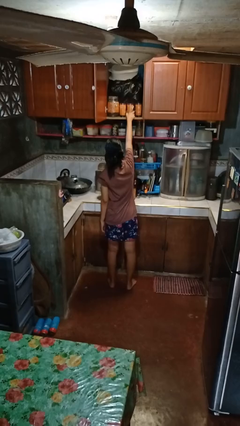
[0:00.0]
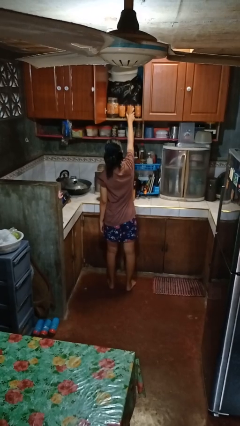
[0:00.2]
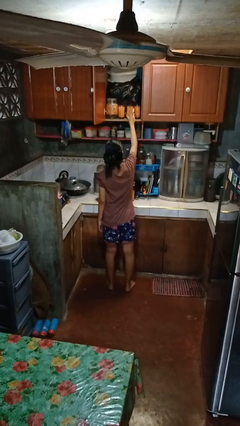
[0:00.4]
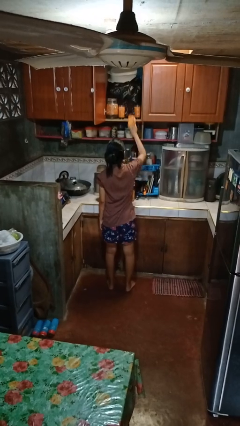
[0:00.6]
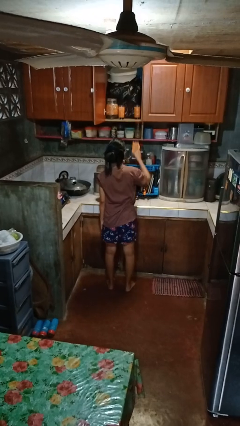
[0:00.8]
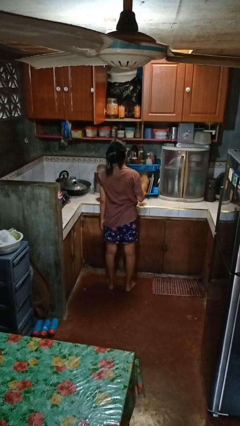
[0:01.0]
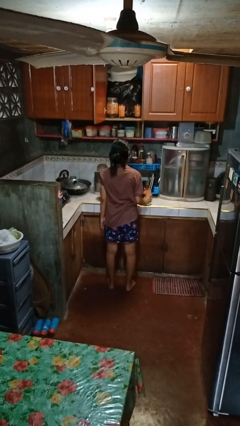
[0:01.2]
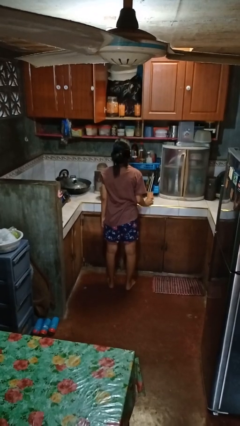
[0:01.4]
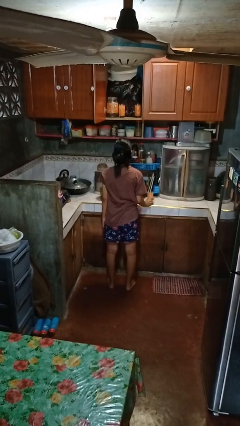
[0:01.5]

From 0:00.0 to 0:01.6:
person takes object from cabinet

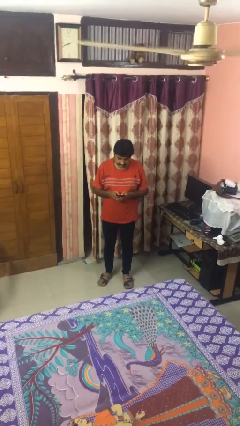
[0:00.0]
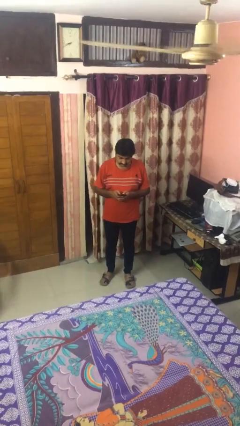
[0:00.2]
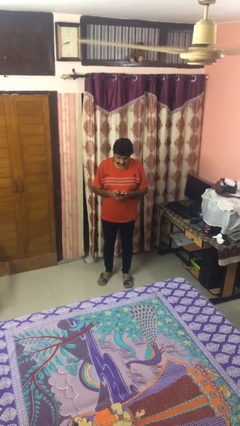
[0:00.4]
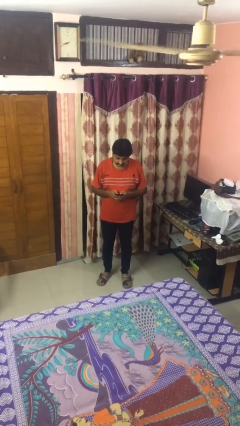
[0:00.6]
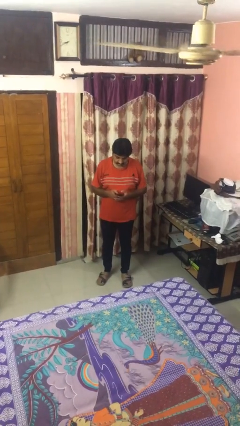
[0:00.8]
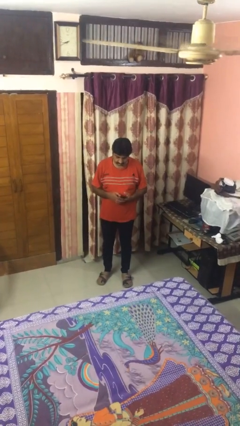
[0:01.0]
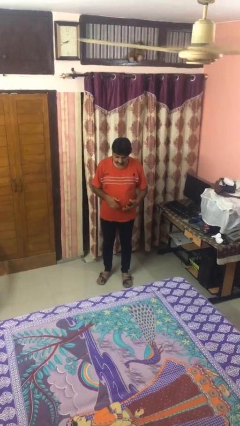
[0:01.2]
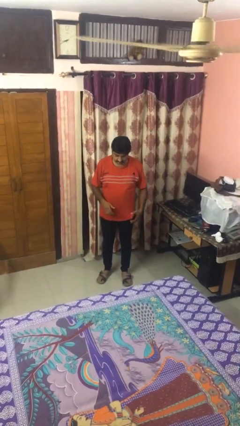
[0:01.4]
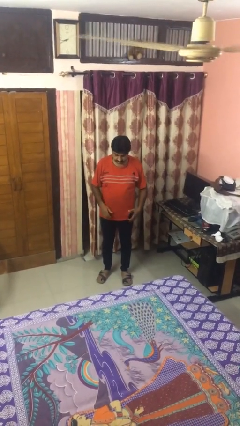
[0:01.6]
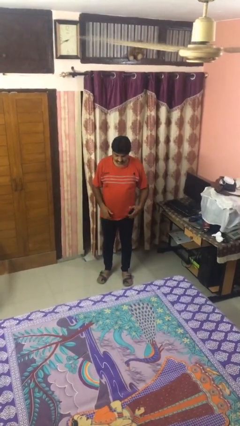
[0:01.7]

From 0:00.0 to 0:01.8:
person puts phone into pocket

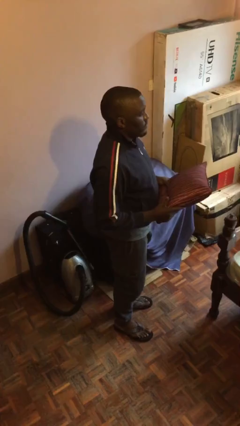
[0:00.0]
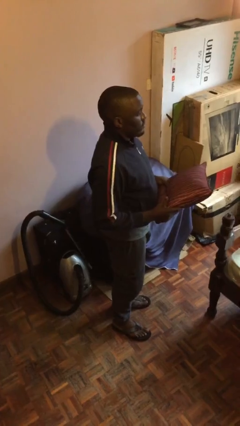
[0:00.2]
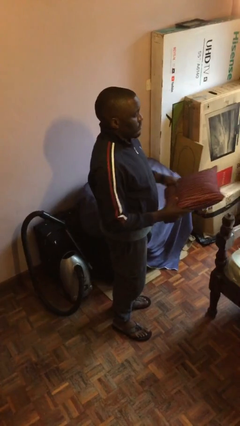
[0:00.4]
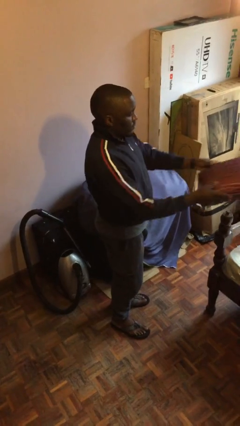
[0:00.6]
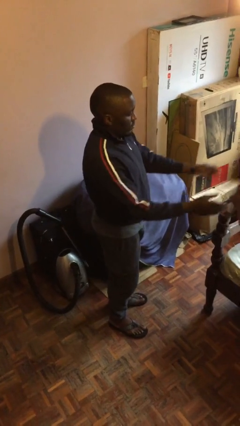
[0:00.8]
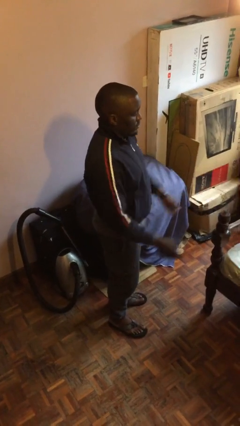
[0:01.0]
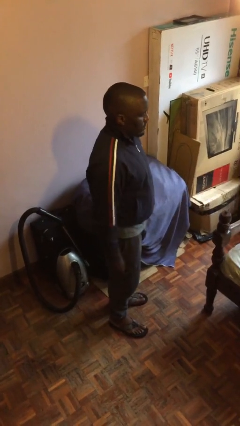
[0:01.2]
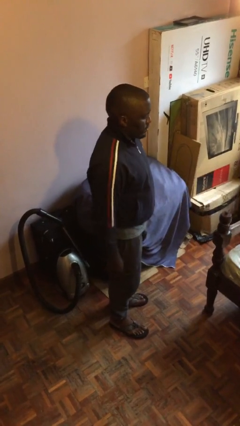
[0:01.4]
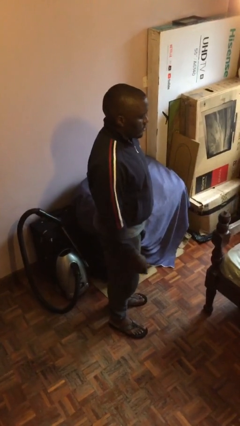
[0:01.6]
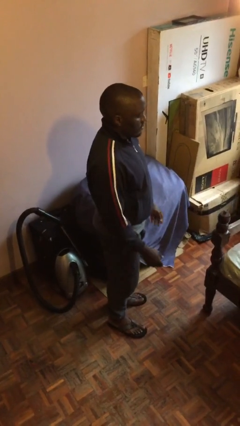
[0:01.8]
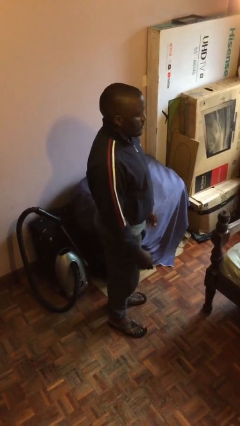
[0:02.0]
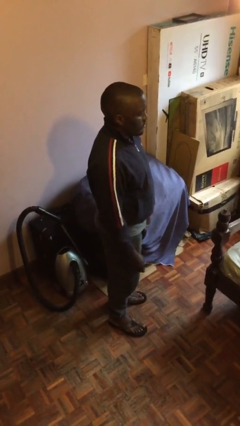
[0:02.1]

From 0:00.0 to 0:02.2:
person throws object on bed

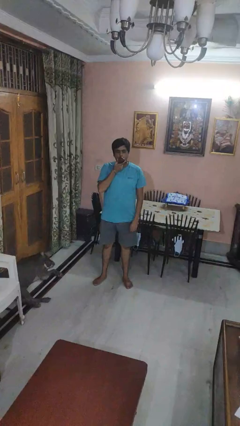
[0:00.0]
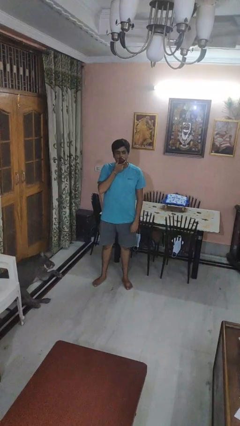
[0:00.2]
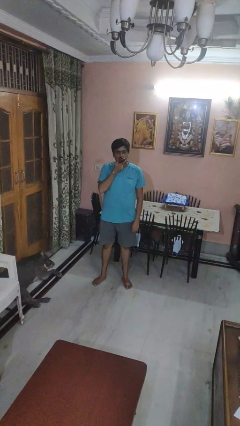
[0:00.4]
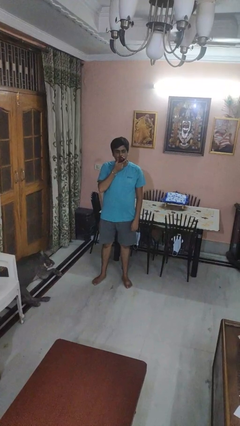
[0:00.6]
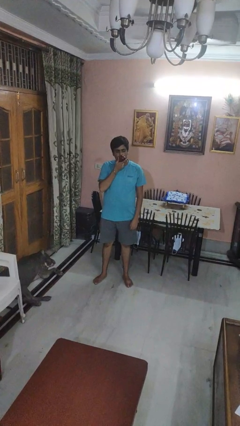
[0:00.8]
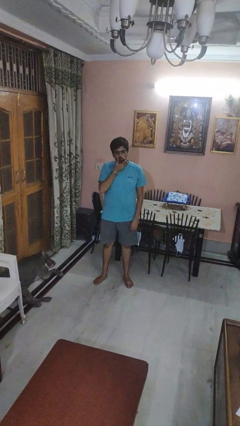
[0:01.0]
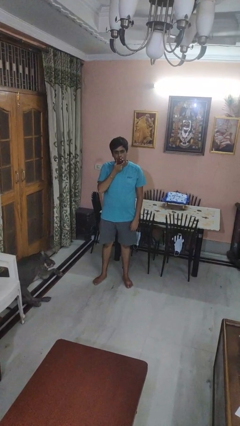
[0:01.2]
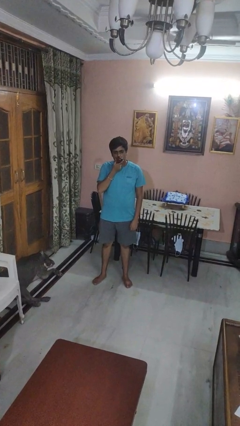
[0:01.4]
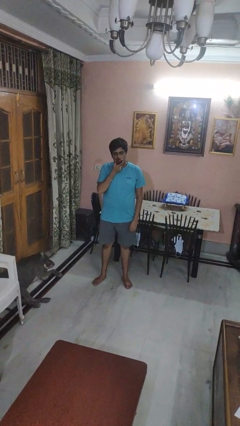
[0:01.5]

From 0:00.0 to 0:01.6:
person eats apple

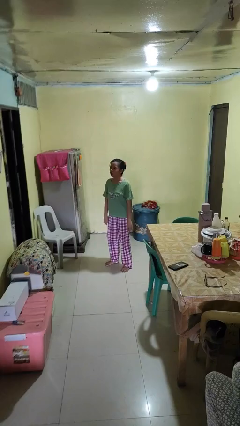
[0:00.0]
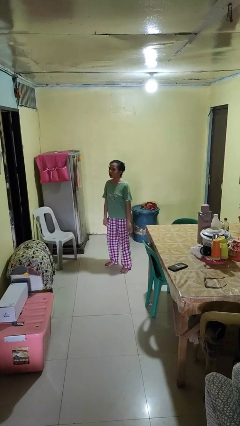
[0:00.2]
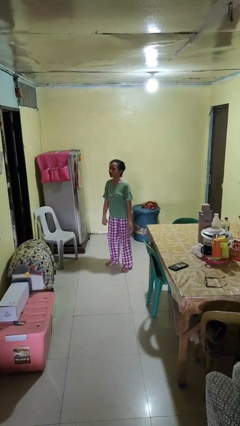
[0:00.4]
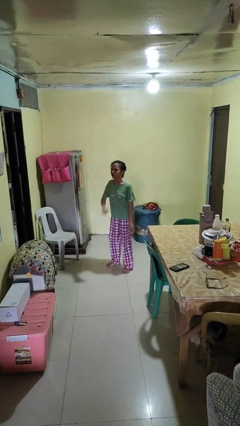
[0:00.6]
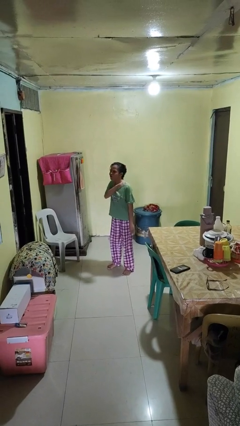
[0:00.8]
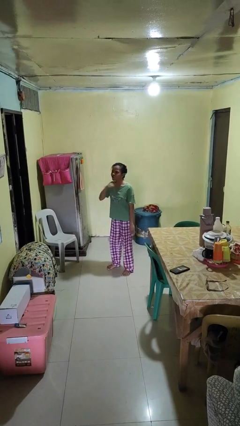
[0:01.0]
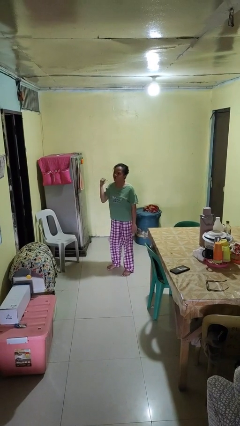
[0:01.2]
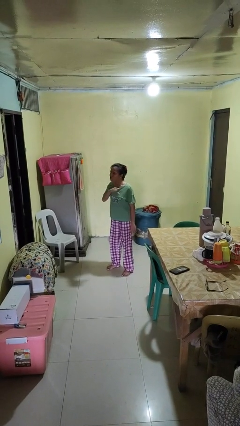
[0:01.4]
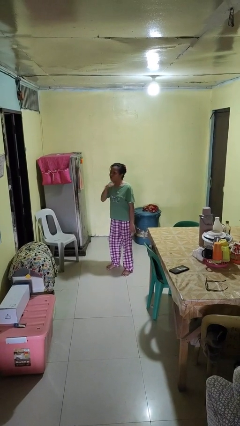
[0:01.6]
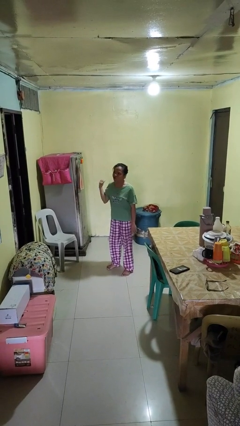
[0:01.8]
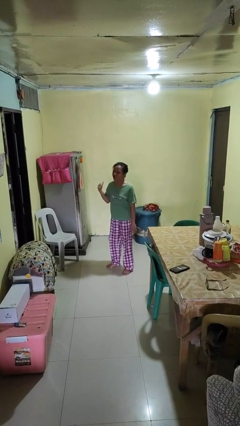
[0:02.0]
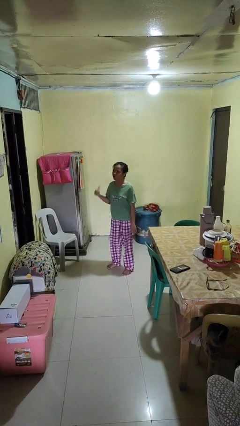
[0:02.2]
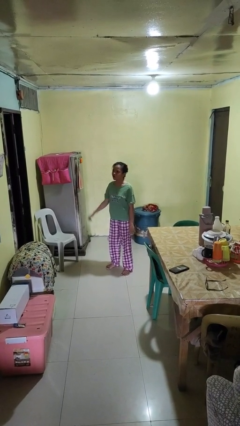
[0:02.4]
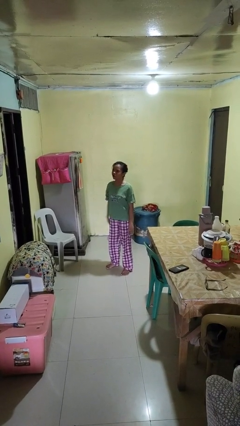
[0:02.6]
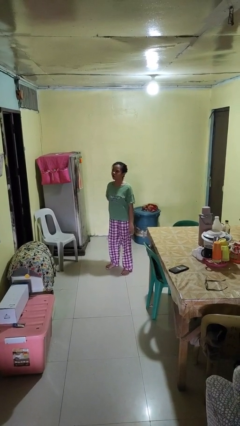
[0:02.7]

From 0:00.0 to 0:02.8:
person gestures cut

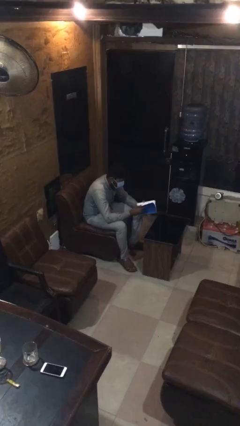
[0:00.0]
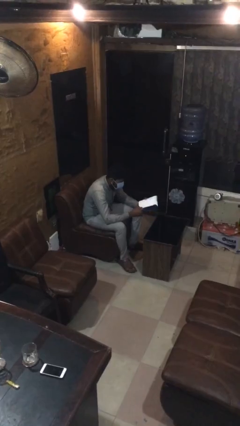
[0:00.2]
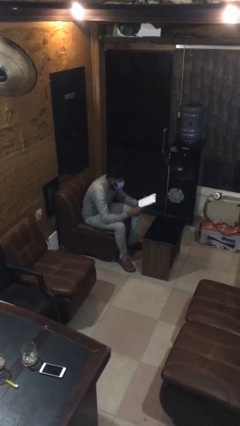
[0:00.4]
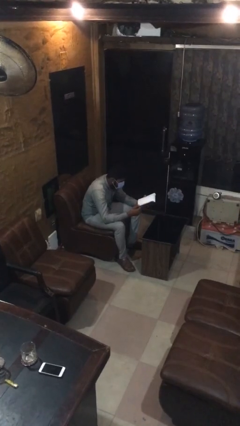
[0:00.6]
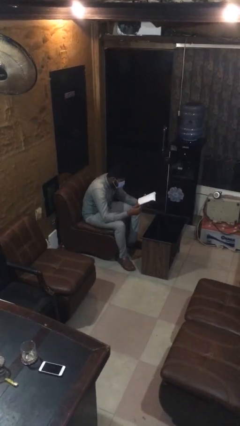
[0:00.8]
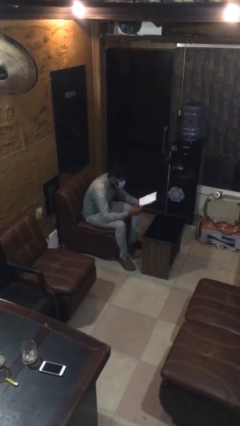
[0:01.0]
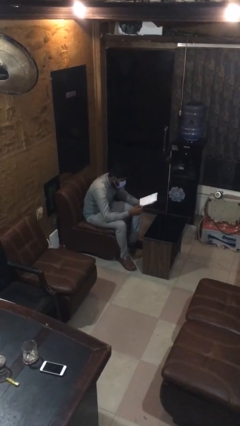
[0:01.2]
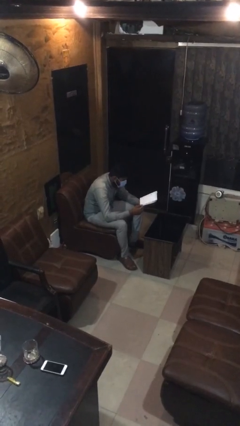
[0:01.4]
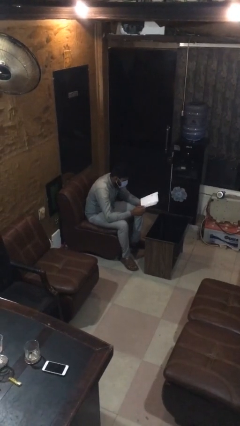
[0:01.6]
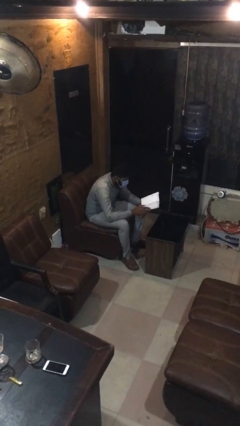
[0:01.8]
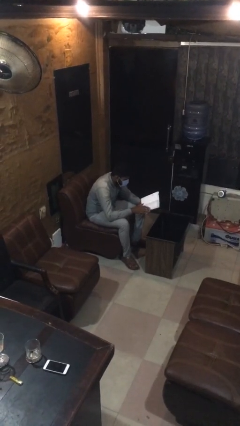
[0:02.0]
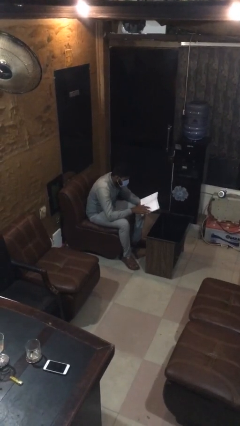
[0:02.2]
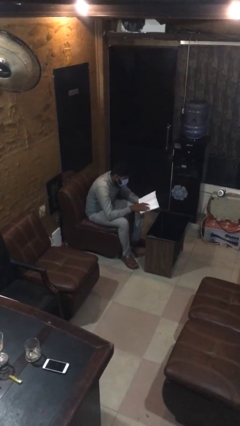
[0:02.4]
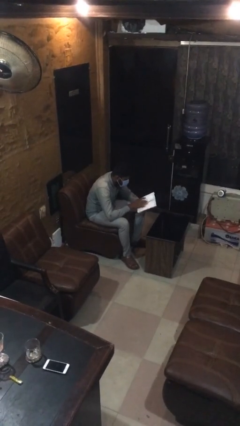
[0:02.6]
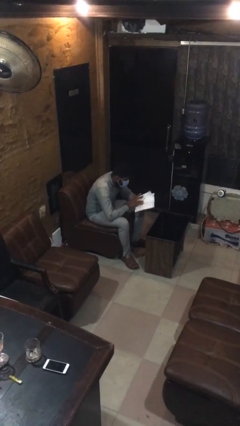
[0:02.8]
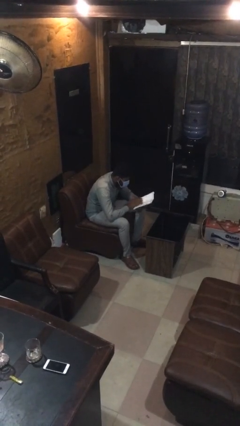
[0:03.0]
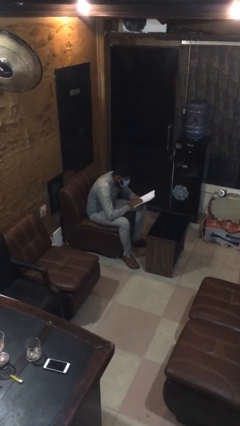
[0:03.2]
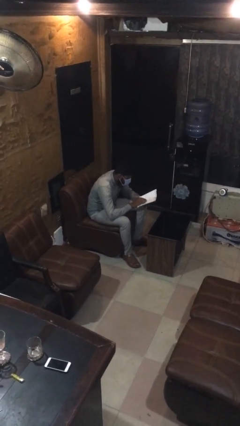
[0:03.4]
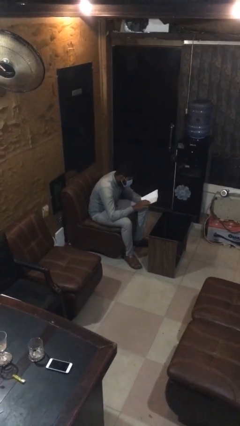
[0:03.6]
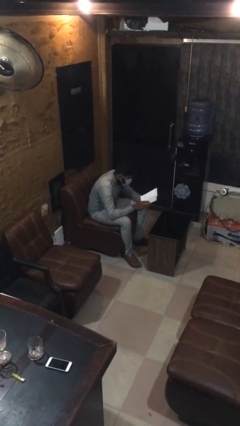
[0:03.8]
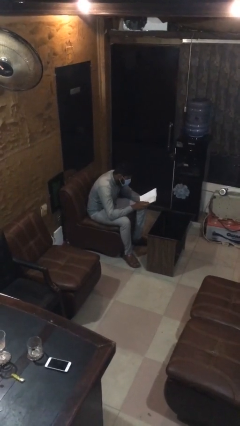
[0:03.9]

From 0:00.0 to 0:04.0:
person reads document

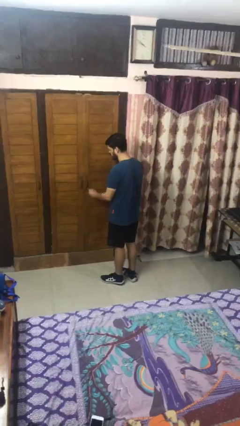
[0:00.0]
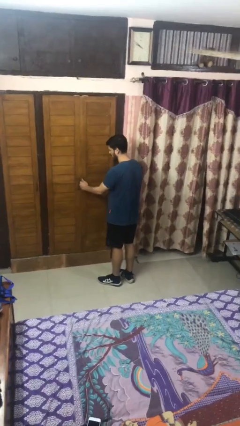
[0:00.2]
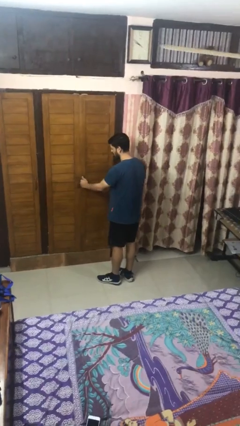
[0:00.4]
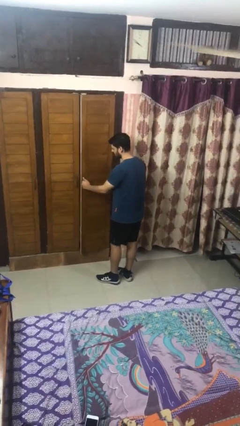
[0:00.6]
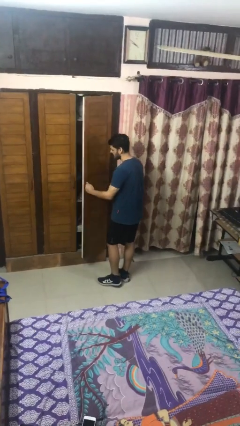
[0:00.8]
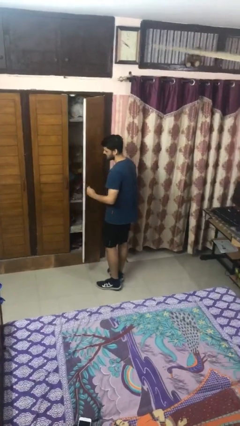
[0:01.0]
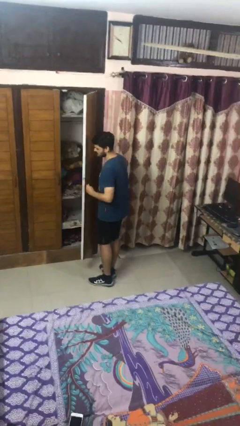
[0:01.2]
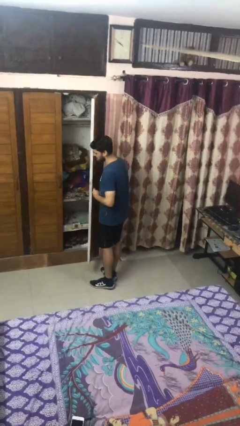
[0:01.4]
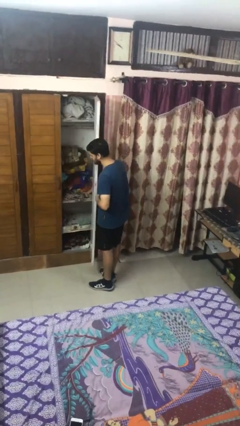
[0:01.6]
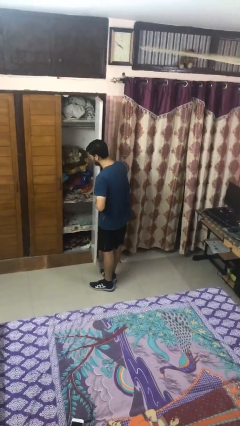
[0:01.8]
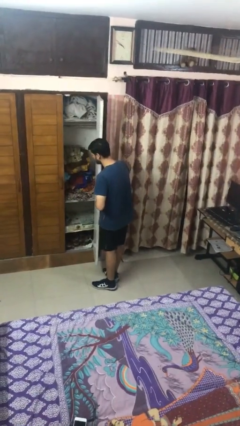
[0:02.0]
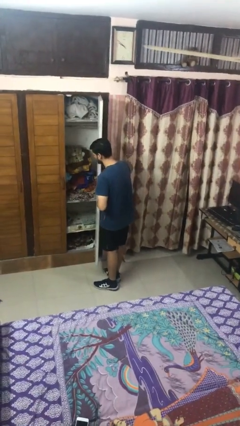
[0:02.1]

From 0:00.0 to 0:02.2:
person opens facility door

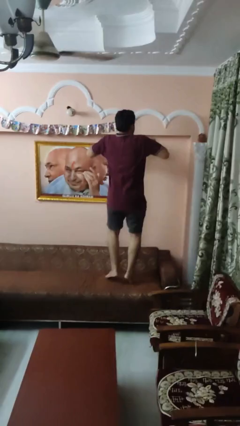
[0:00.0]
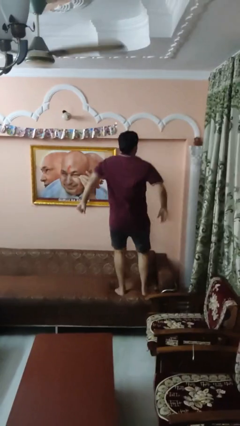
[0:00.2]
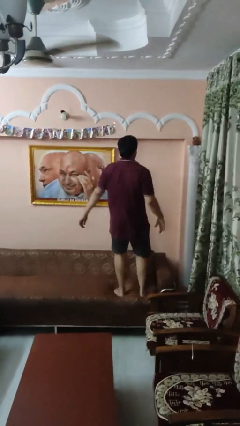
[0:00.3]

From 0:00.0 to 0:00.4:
person jumps on couch
